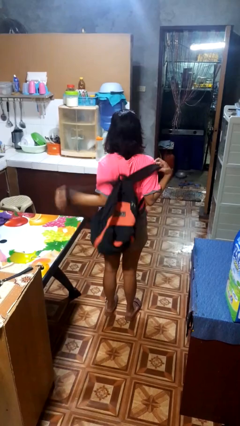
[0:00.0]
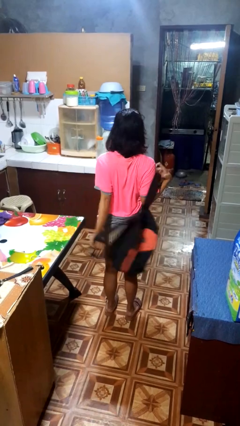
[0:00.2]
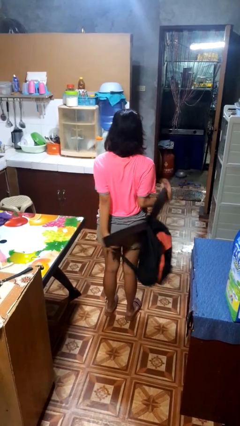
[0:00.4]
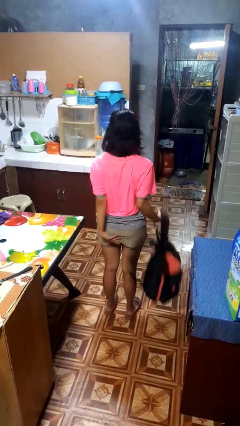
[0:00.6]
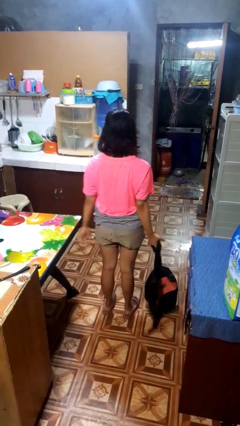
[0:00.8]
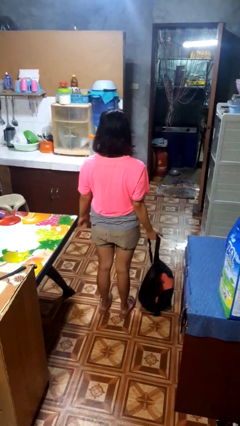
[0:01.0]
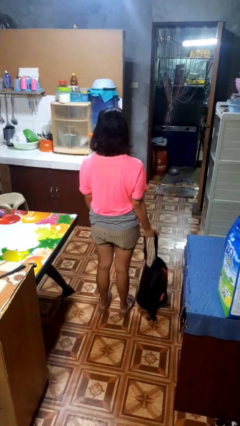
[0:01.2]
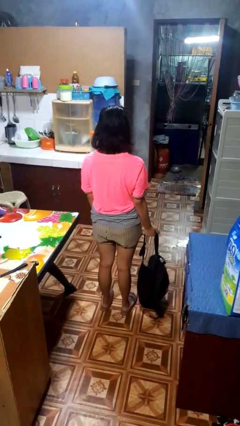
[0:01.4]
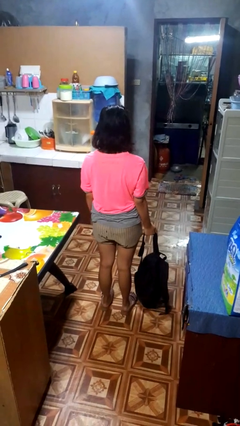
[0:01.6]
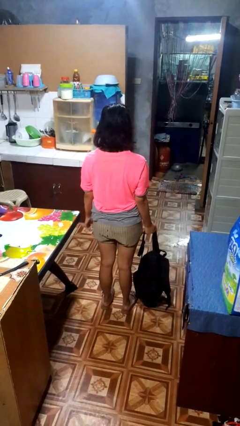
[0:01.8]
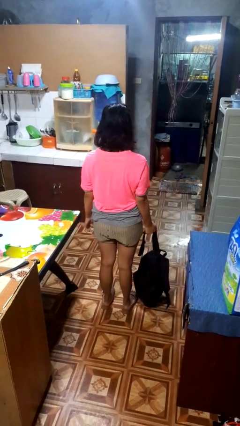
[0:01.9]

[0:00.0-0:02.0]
person takes off backpack

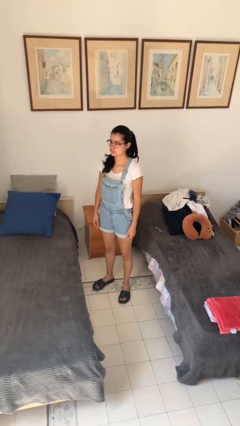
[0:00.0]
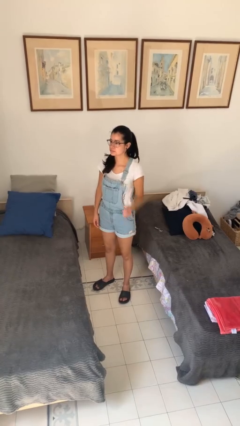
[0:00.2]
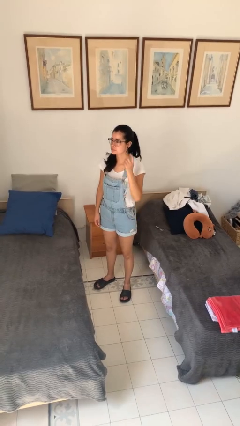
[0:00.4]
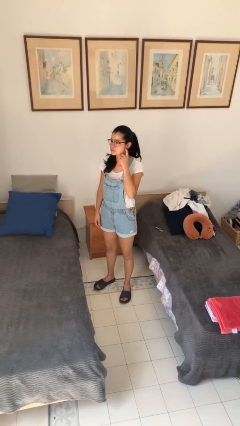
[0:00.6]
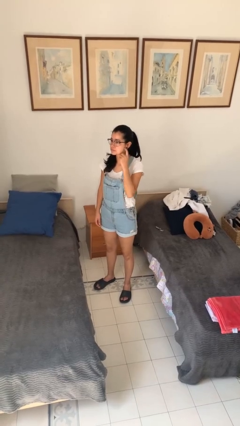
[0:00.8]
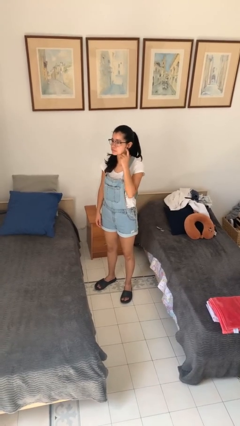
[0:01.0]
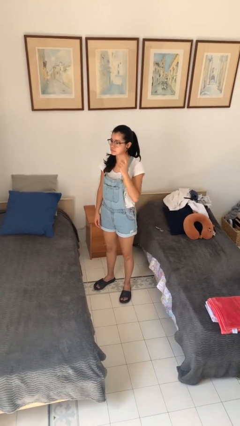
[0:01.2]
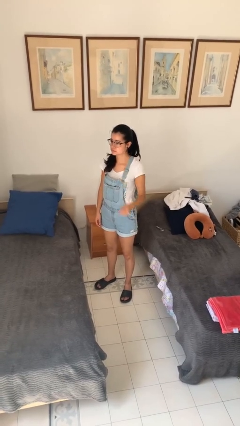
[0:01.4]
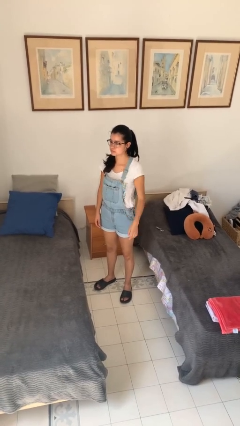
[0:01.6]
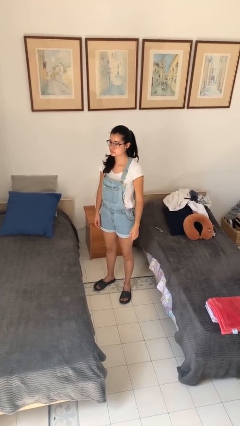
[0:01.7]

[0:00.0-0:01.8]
person gestures heart

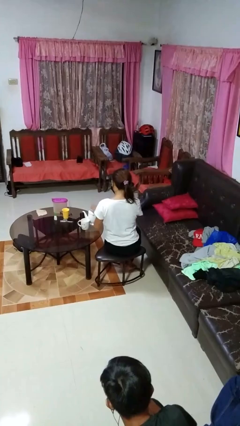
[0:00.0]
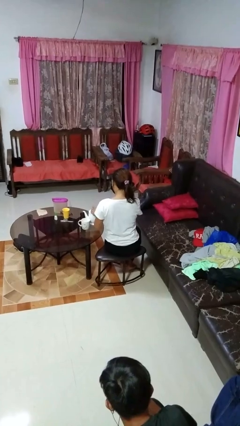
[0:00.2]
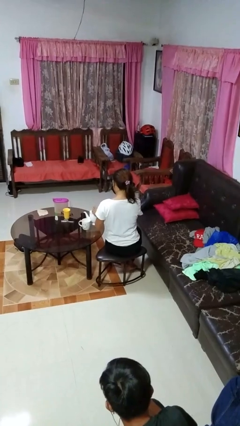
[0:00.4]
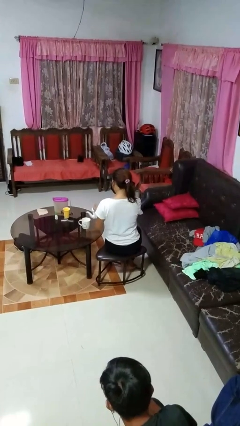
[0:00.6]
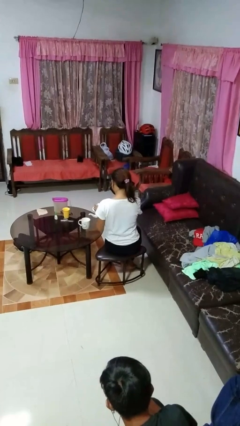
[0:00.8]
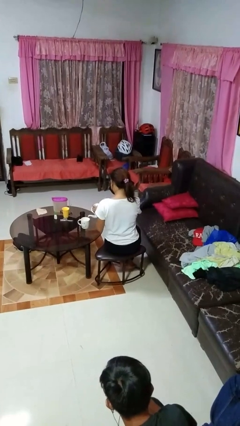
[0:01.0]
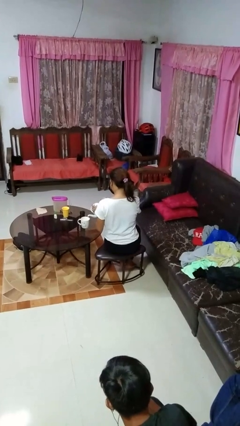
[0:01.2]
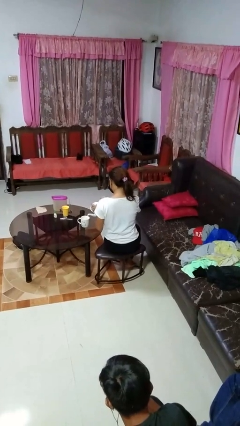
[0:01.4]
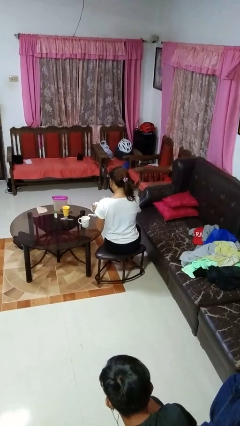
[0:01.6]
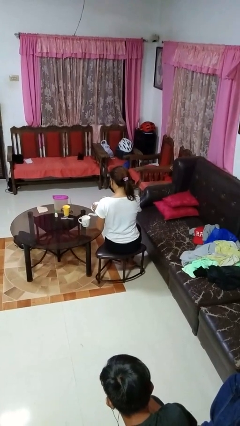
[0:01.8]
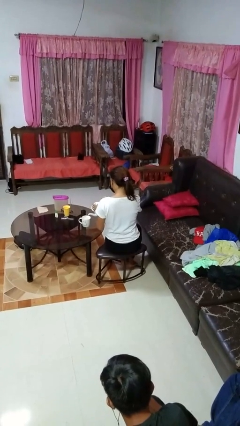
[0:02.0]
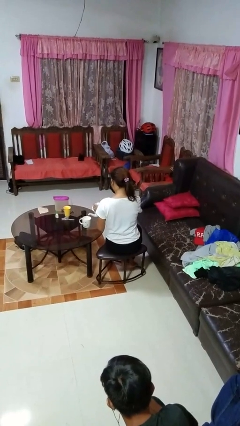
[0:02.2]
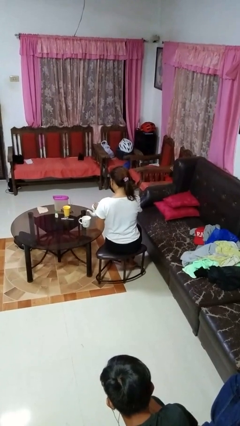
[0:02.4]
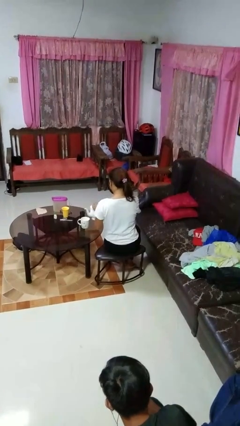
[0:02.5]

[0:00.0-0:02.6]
person pours coffee into mug

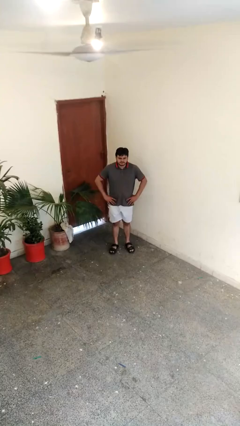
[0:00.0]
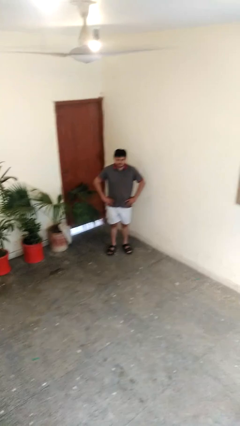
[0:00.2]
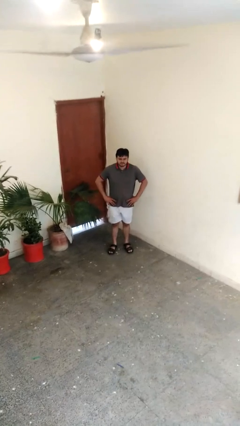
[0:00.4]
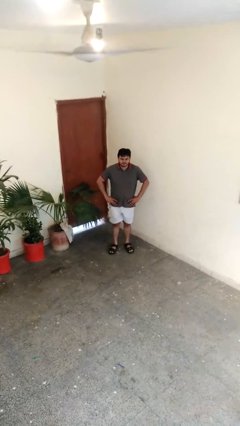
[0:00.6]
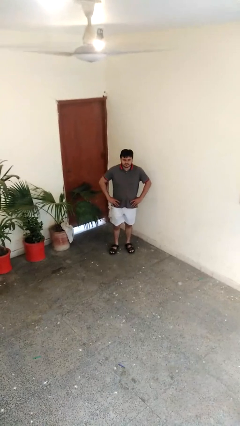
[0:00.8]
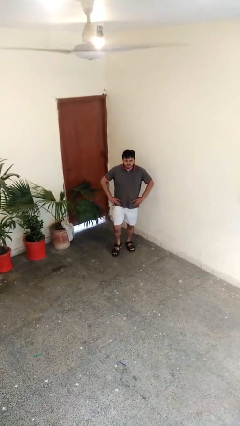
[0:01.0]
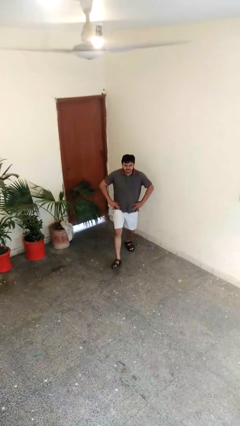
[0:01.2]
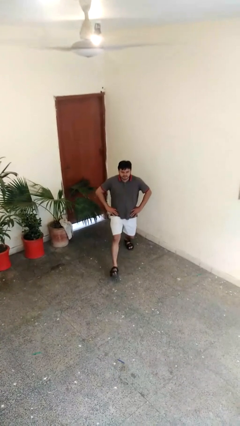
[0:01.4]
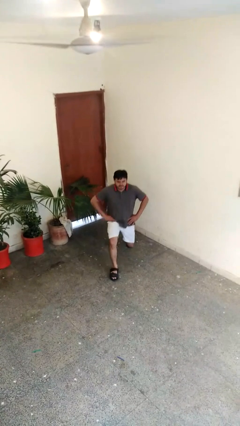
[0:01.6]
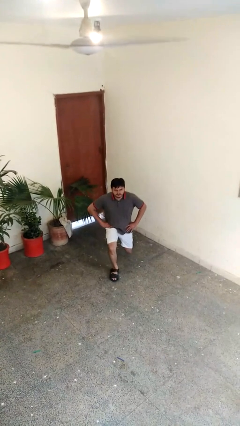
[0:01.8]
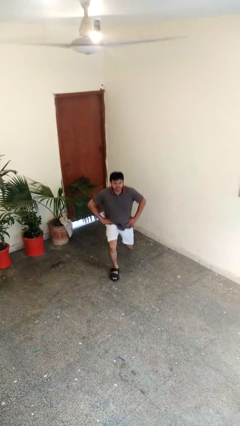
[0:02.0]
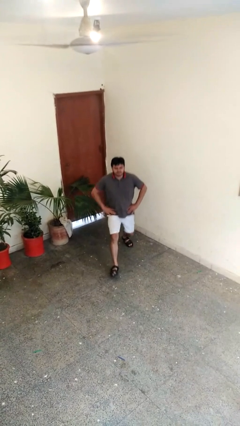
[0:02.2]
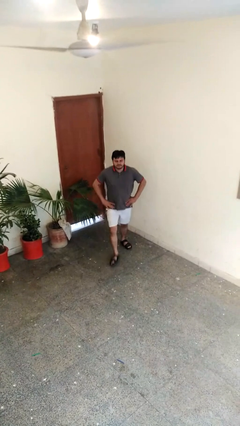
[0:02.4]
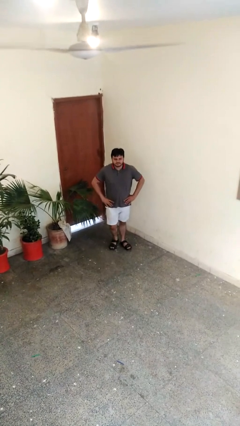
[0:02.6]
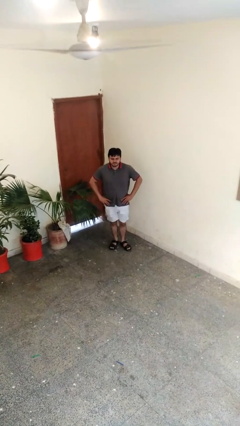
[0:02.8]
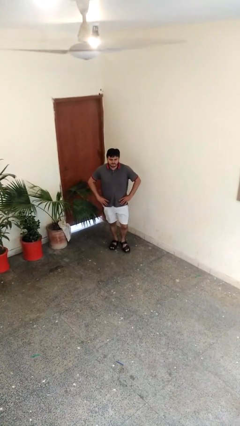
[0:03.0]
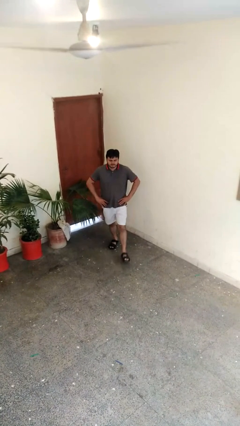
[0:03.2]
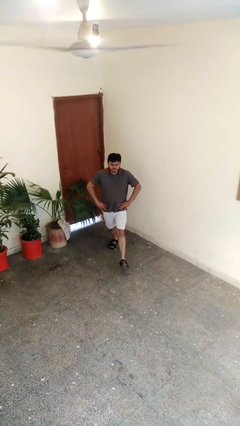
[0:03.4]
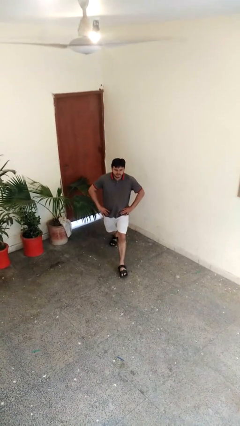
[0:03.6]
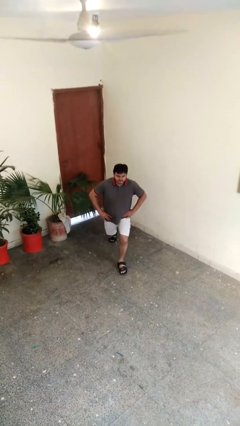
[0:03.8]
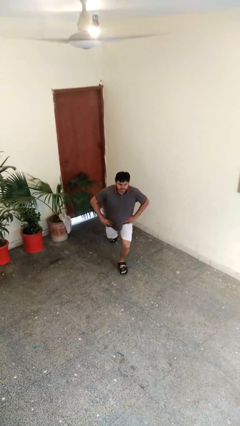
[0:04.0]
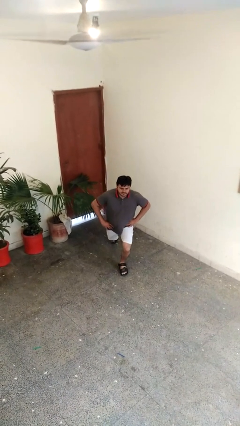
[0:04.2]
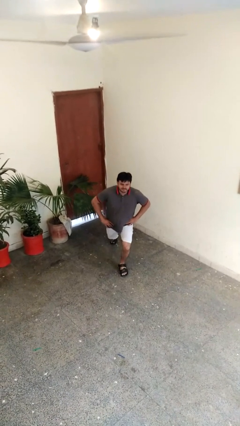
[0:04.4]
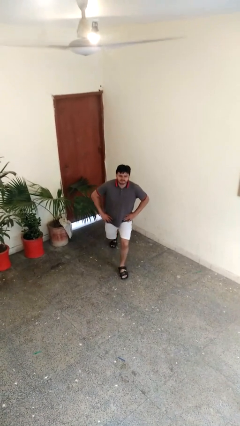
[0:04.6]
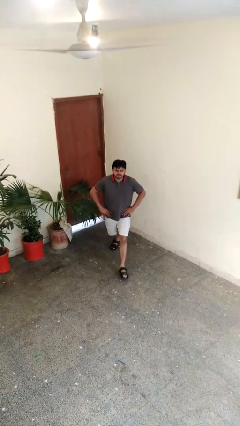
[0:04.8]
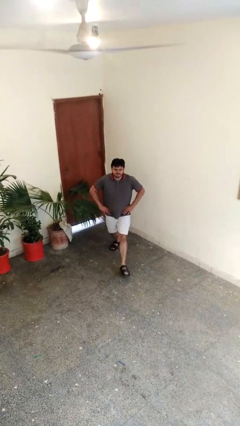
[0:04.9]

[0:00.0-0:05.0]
person exercises with lunges

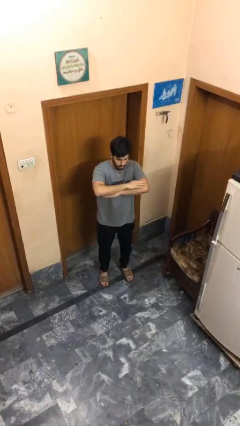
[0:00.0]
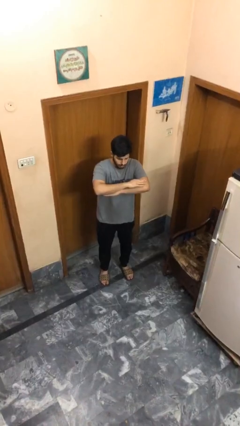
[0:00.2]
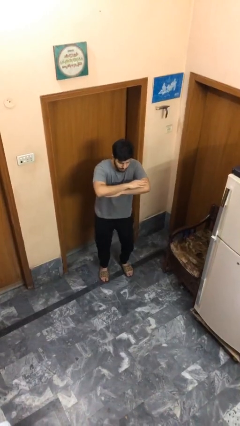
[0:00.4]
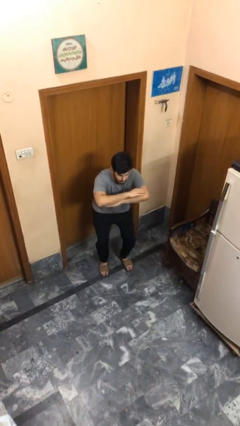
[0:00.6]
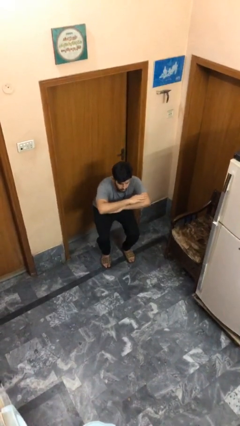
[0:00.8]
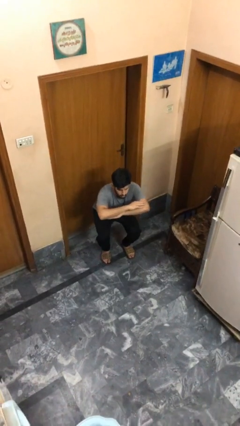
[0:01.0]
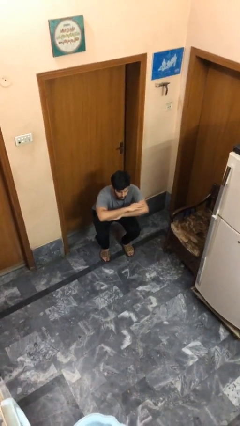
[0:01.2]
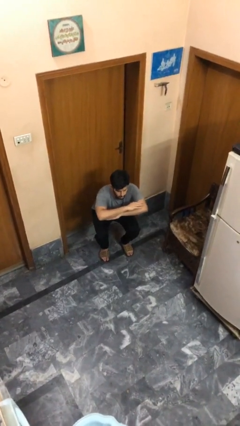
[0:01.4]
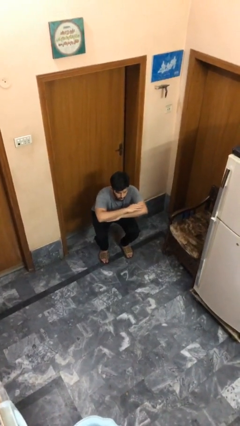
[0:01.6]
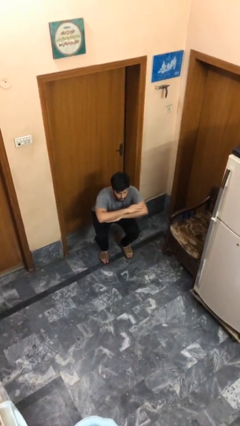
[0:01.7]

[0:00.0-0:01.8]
person squats

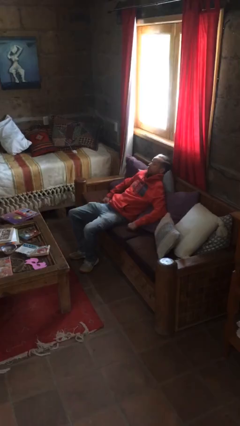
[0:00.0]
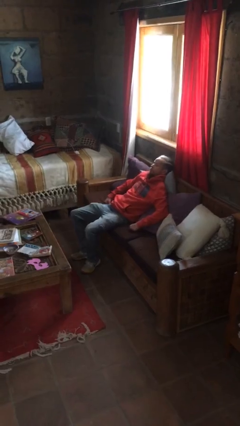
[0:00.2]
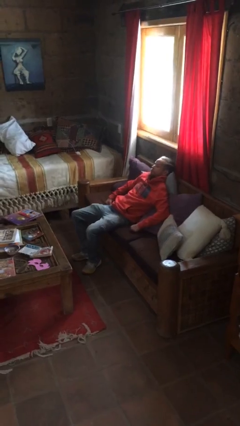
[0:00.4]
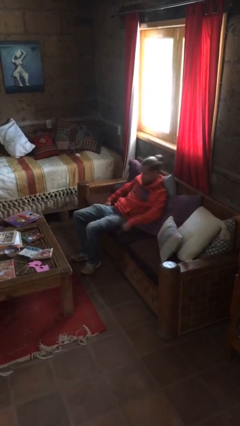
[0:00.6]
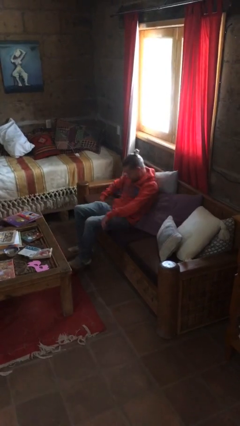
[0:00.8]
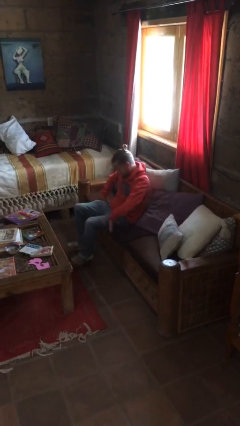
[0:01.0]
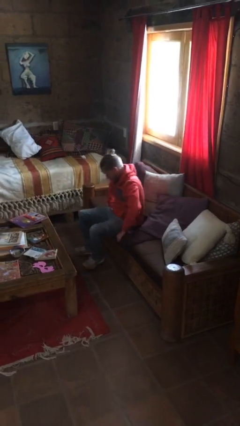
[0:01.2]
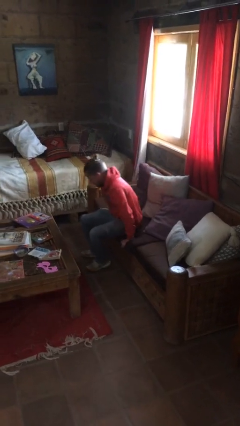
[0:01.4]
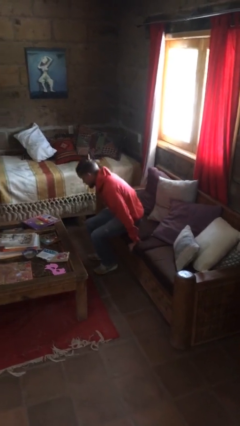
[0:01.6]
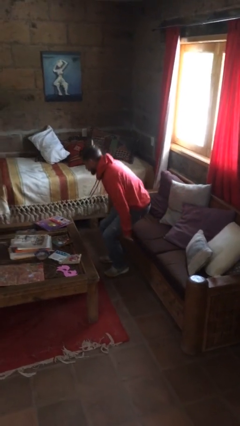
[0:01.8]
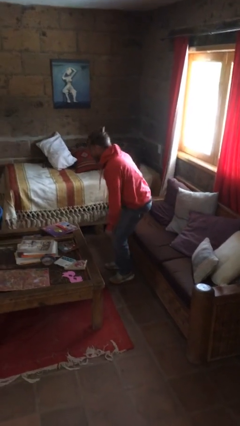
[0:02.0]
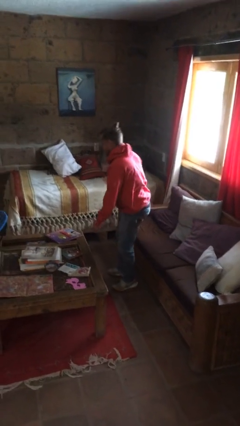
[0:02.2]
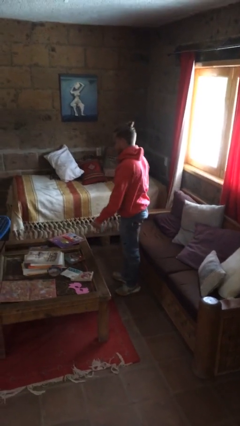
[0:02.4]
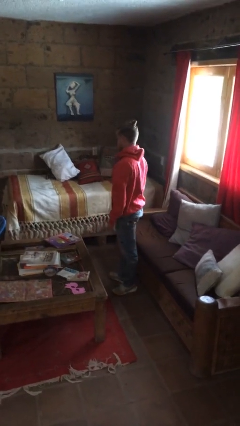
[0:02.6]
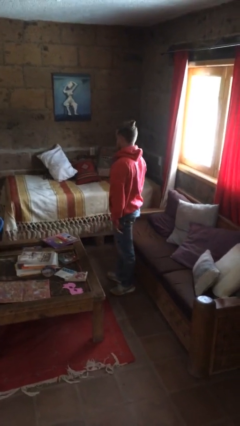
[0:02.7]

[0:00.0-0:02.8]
person stands up

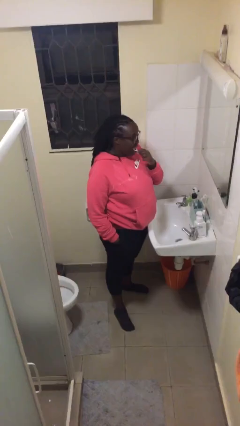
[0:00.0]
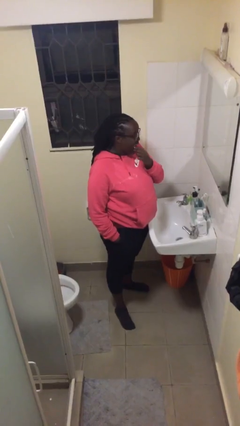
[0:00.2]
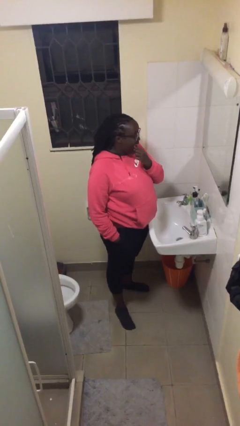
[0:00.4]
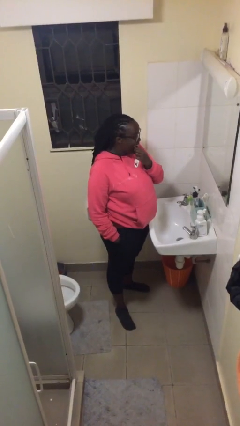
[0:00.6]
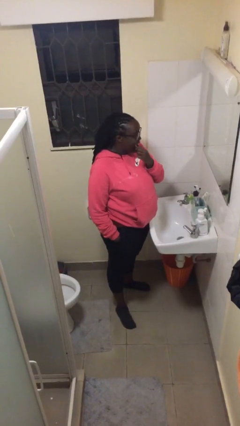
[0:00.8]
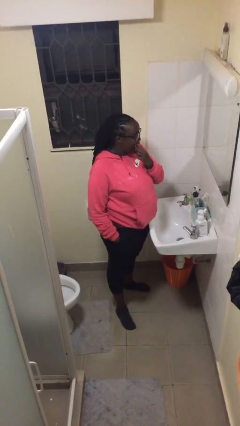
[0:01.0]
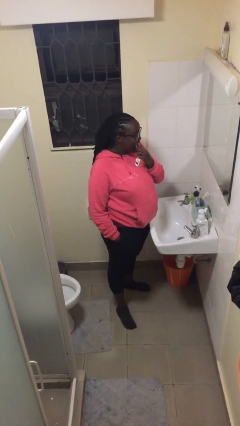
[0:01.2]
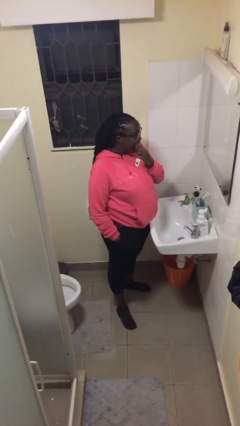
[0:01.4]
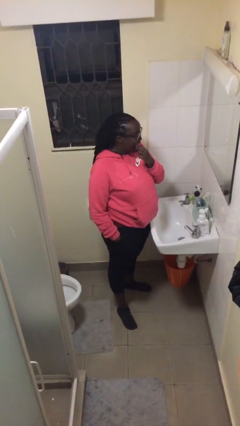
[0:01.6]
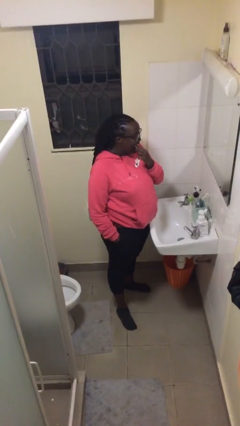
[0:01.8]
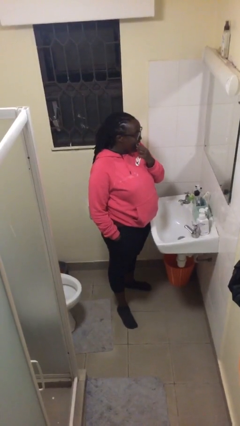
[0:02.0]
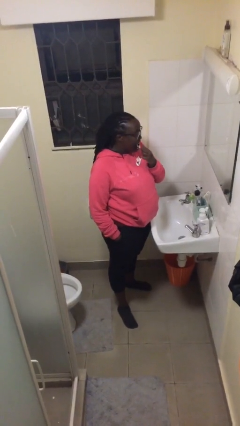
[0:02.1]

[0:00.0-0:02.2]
person flosses
